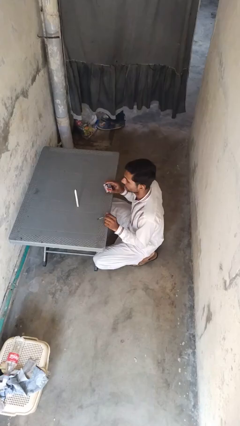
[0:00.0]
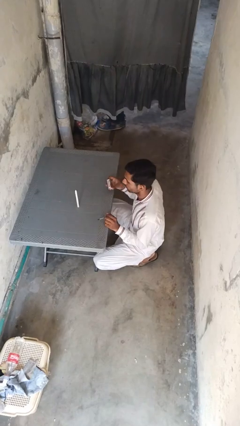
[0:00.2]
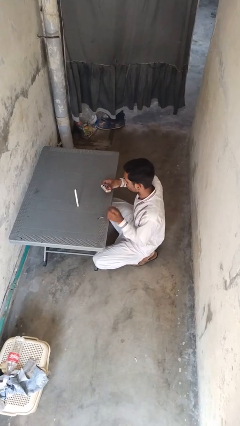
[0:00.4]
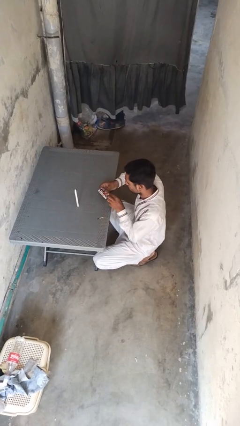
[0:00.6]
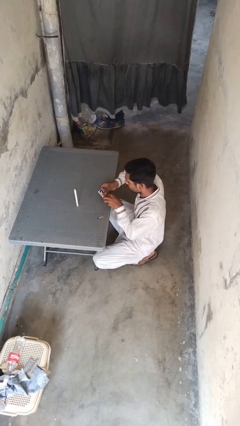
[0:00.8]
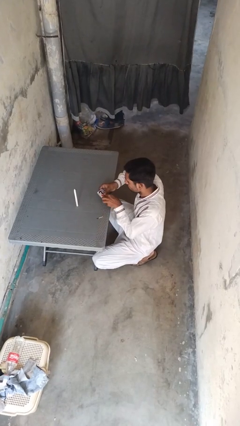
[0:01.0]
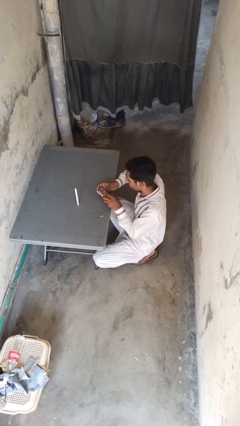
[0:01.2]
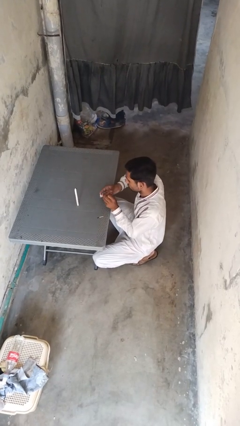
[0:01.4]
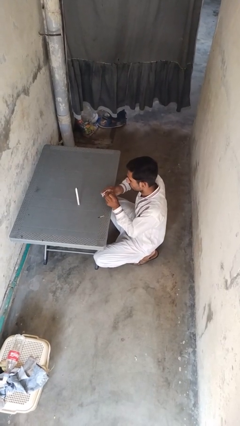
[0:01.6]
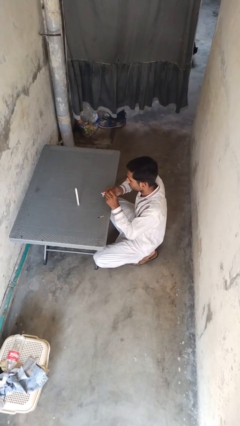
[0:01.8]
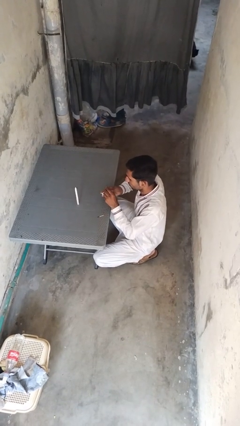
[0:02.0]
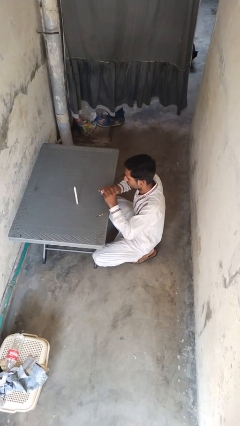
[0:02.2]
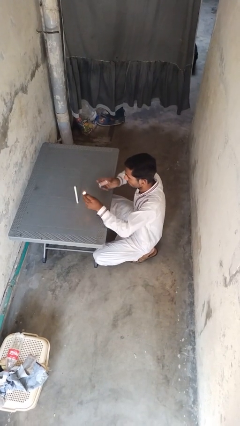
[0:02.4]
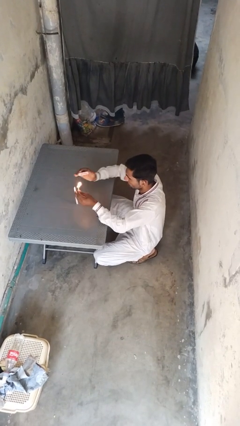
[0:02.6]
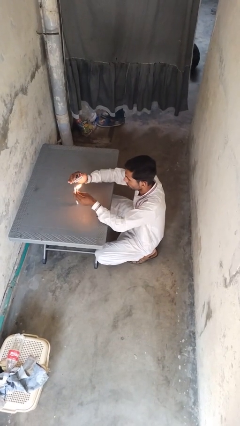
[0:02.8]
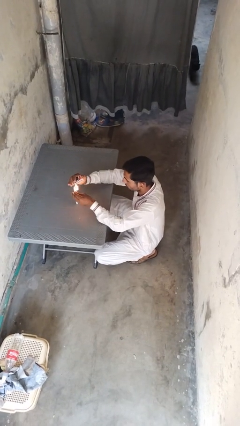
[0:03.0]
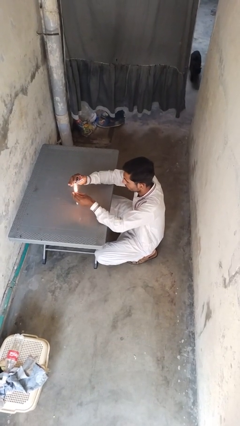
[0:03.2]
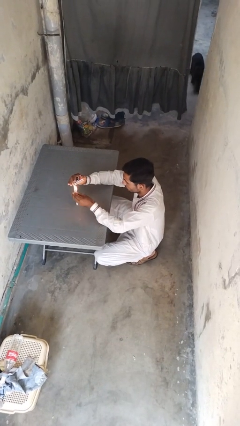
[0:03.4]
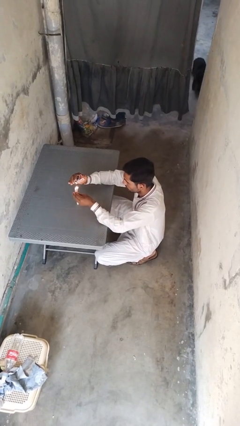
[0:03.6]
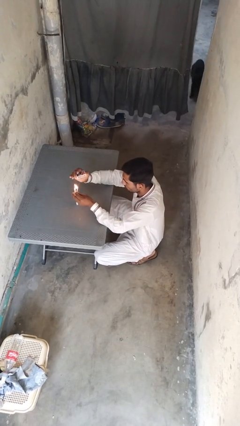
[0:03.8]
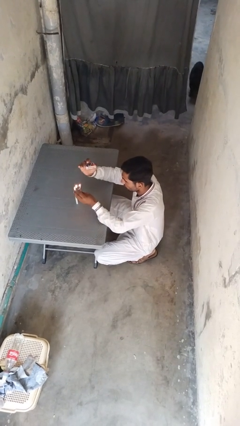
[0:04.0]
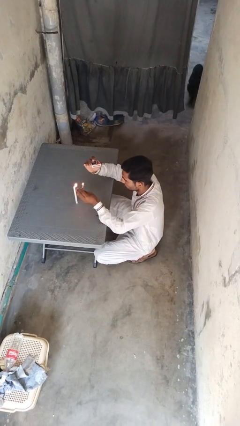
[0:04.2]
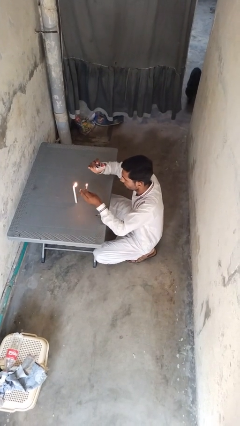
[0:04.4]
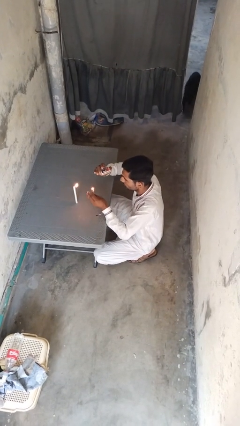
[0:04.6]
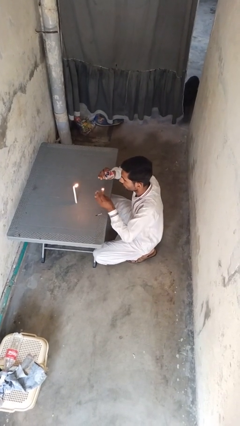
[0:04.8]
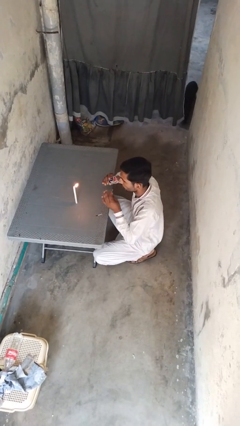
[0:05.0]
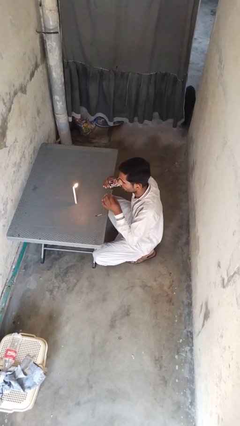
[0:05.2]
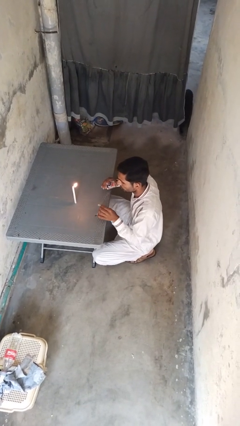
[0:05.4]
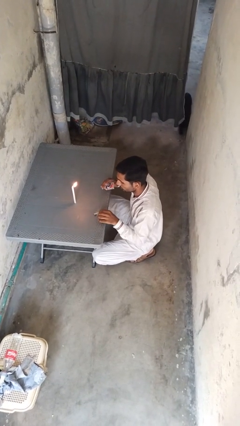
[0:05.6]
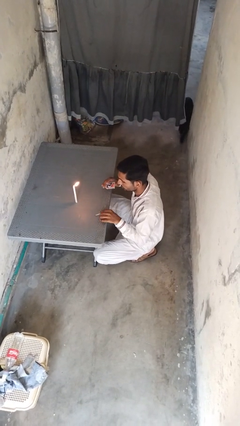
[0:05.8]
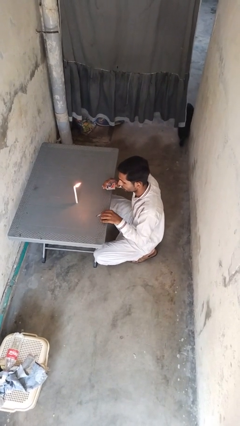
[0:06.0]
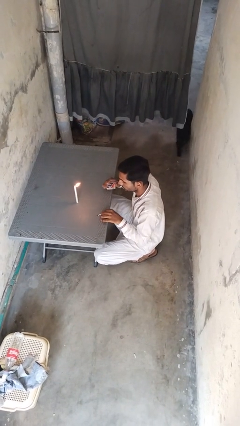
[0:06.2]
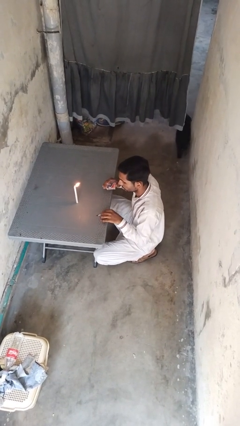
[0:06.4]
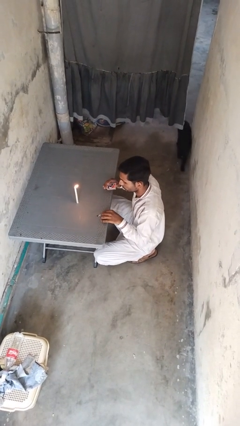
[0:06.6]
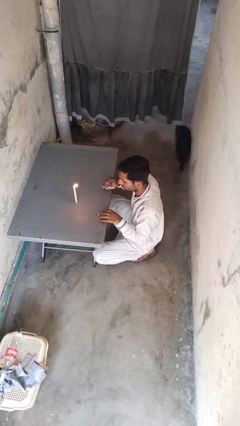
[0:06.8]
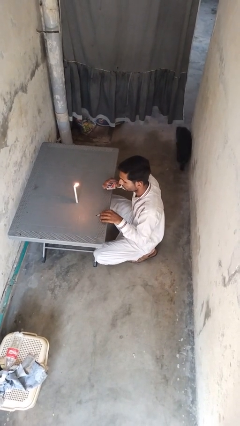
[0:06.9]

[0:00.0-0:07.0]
person lights candle

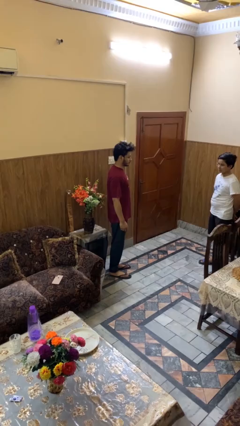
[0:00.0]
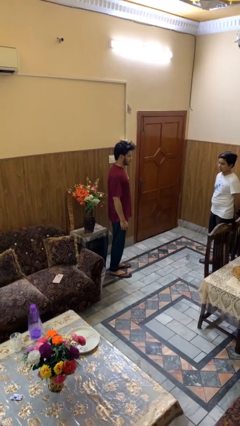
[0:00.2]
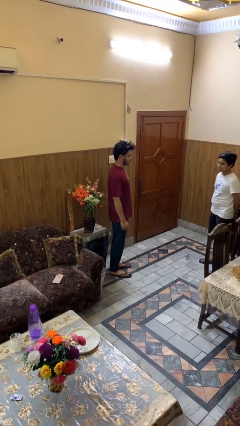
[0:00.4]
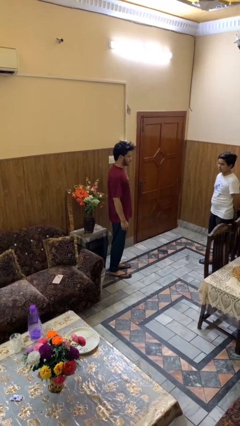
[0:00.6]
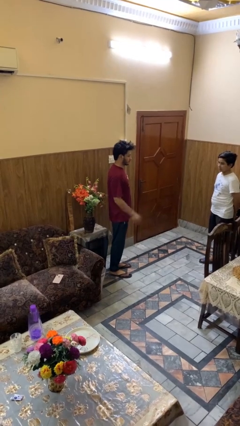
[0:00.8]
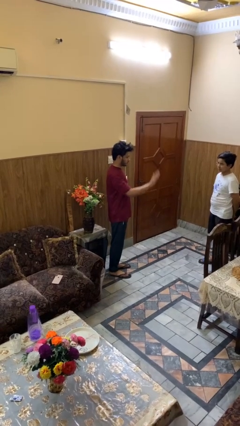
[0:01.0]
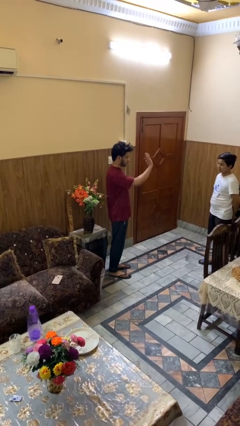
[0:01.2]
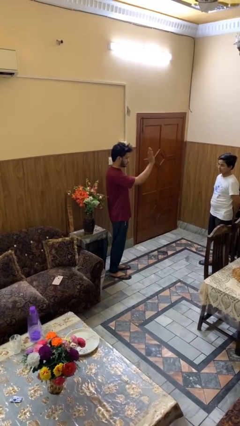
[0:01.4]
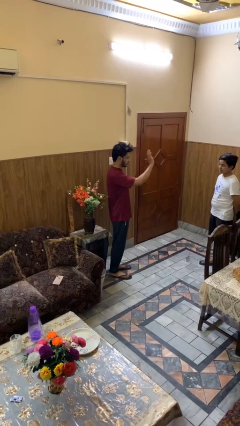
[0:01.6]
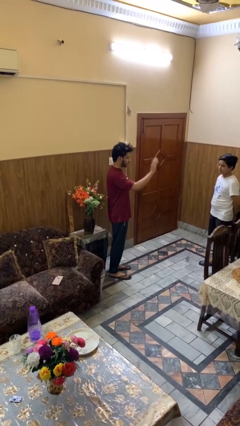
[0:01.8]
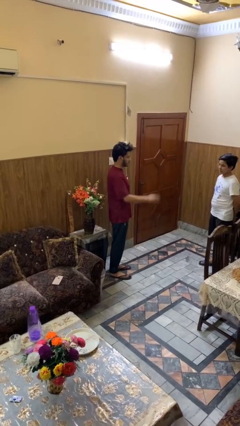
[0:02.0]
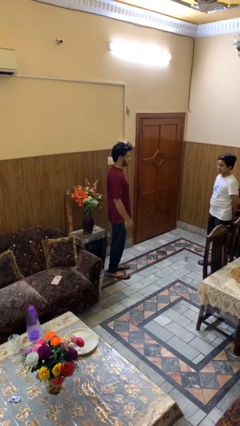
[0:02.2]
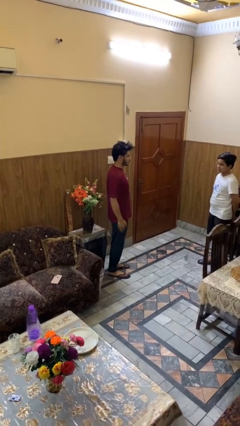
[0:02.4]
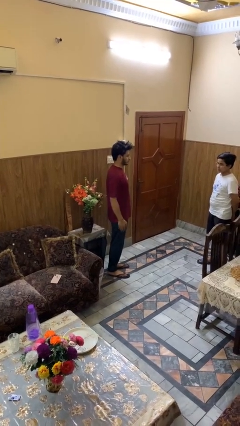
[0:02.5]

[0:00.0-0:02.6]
person waves at person

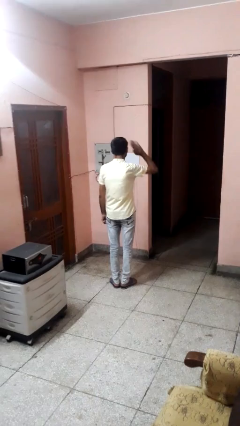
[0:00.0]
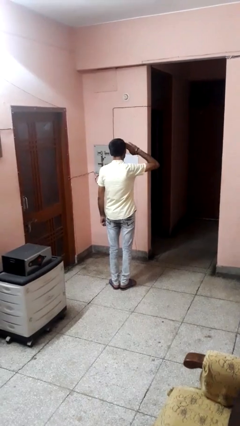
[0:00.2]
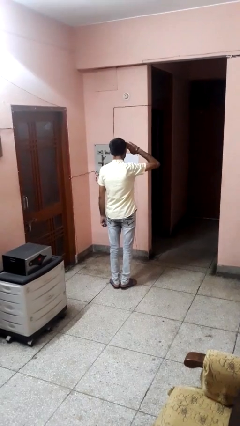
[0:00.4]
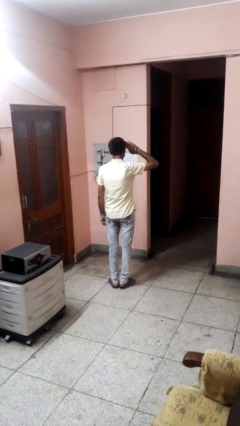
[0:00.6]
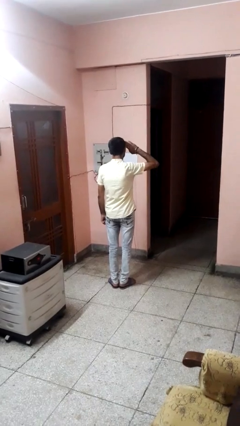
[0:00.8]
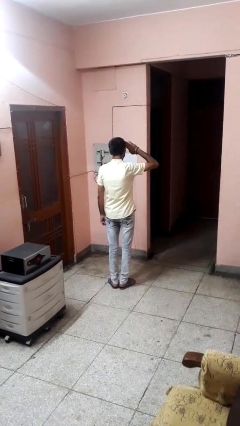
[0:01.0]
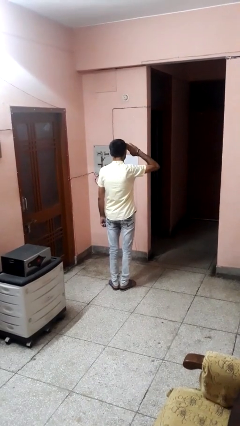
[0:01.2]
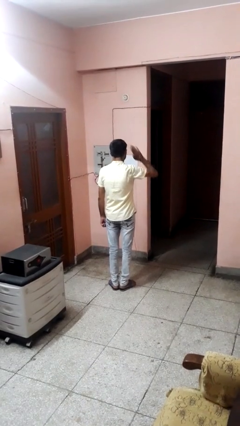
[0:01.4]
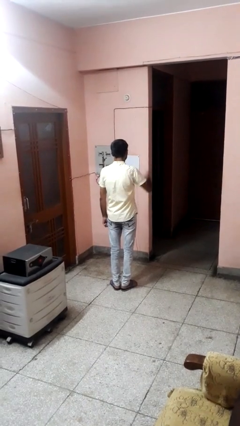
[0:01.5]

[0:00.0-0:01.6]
person salutes

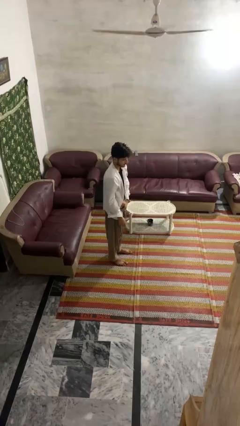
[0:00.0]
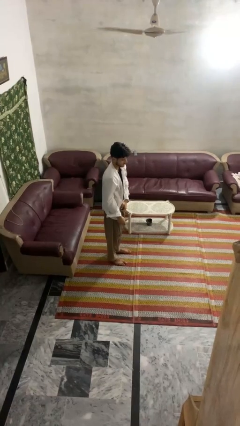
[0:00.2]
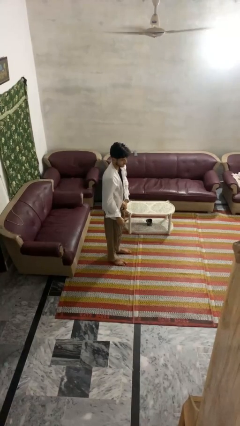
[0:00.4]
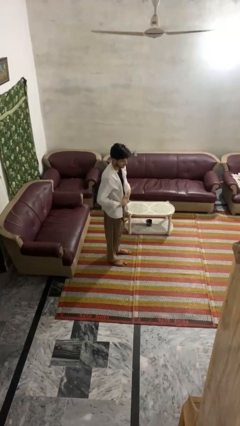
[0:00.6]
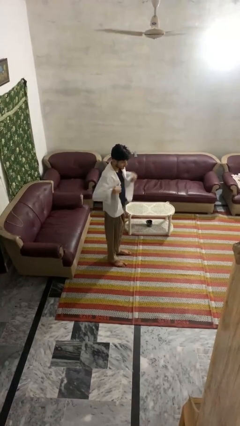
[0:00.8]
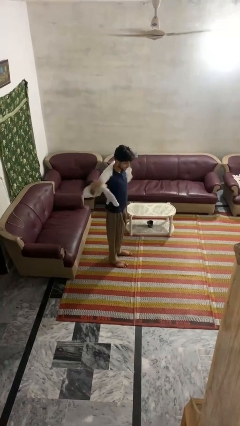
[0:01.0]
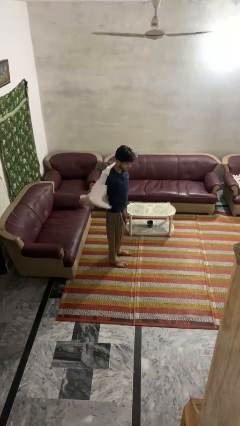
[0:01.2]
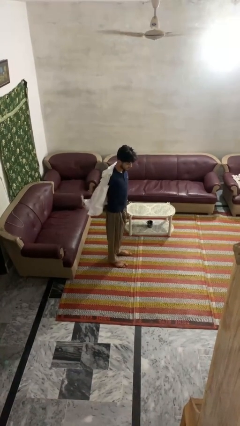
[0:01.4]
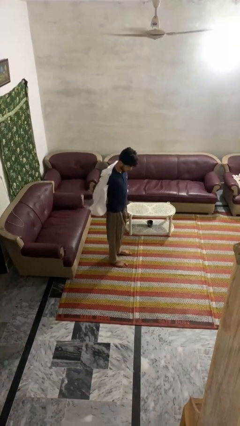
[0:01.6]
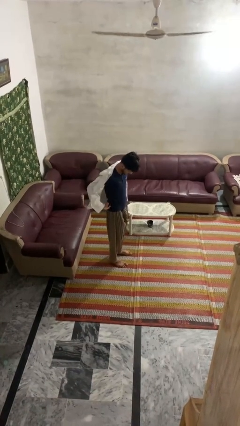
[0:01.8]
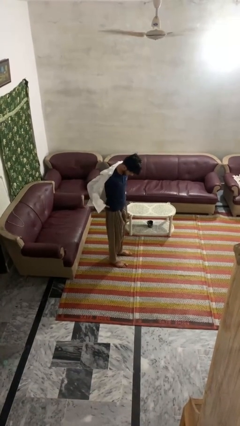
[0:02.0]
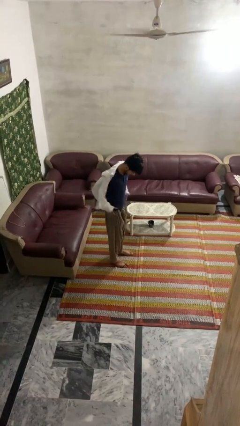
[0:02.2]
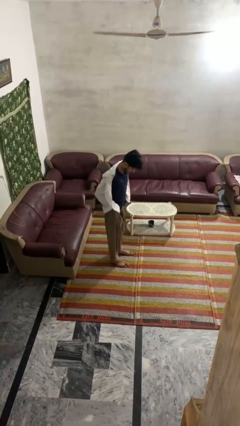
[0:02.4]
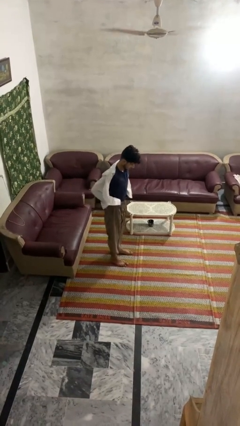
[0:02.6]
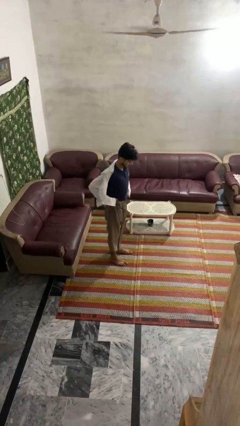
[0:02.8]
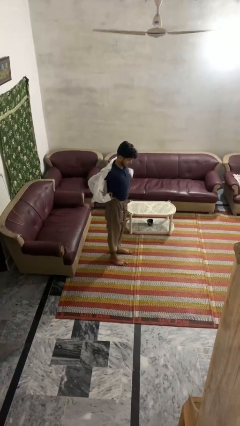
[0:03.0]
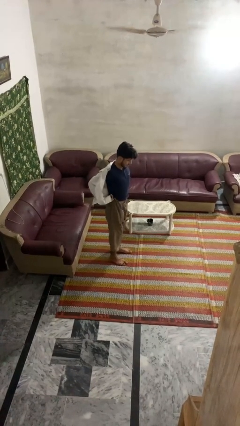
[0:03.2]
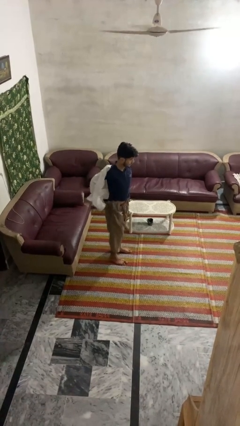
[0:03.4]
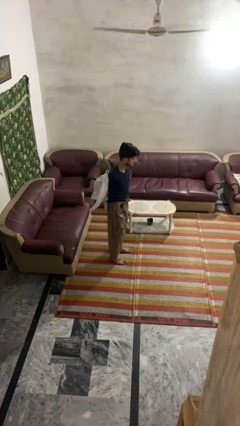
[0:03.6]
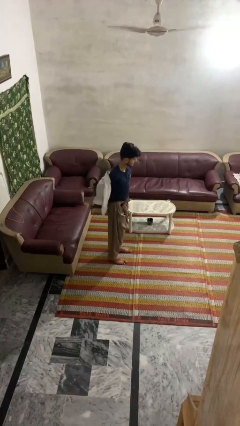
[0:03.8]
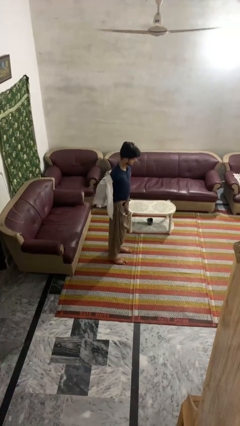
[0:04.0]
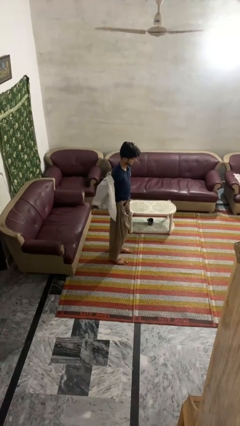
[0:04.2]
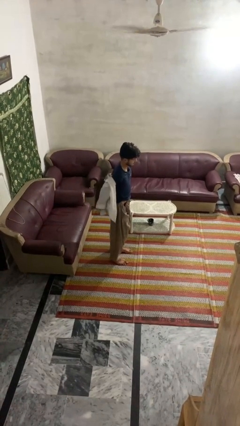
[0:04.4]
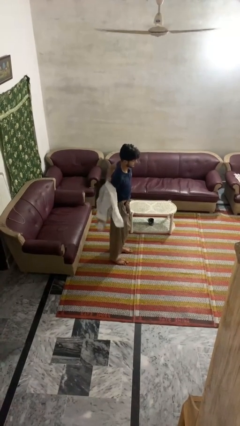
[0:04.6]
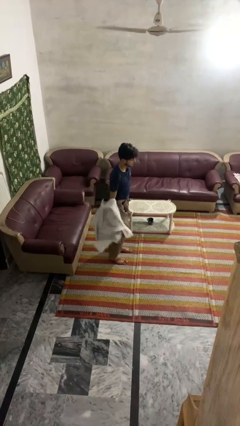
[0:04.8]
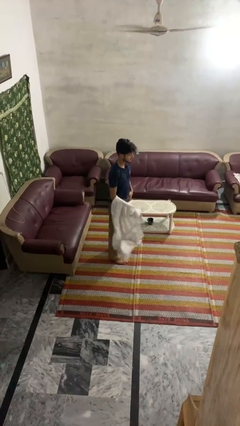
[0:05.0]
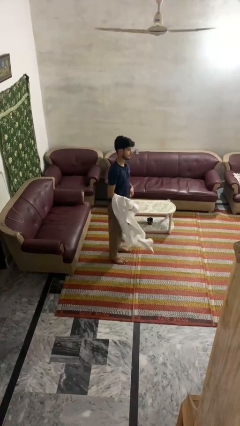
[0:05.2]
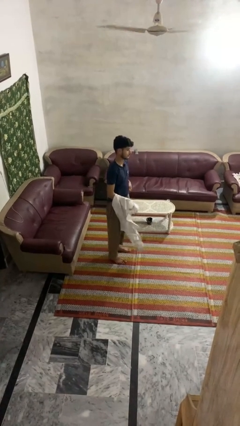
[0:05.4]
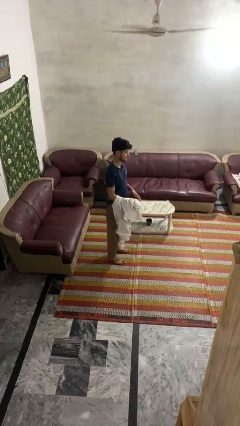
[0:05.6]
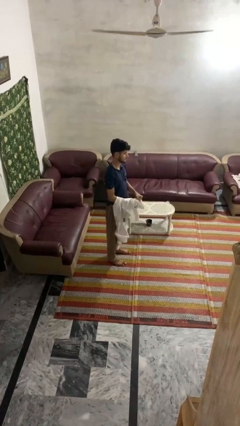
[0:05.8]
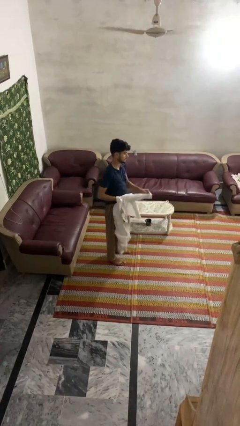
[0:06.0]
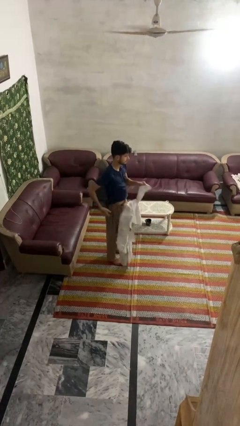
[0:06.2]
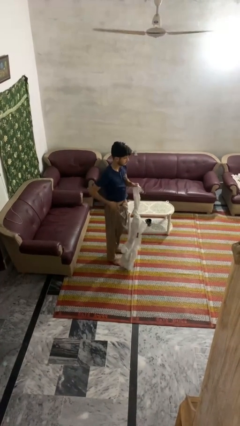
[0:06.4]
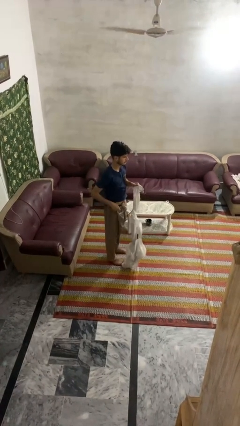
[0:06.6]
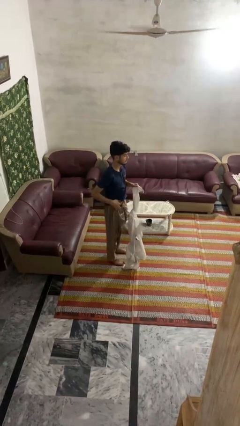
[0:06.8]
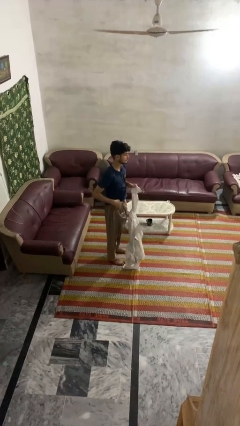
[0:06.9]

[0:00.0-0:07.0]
person takes off shirt
